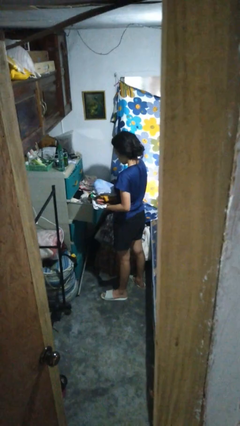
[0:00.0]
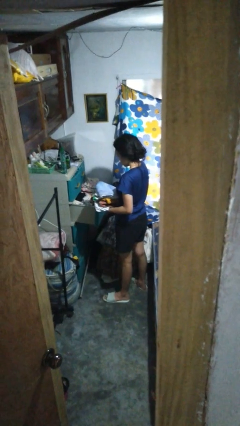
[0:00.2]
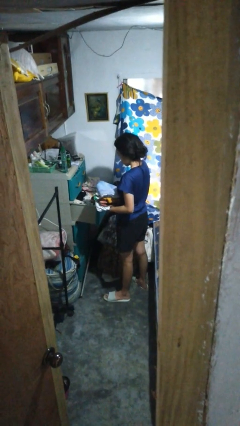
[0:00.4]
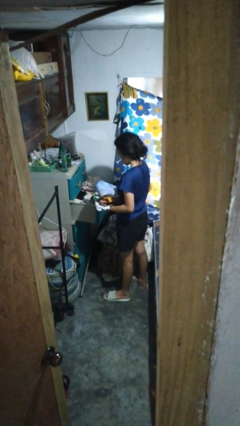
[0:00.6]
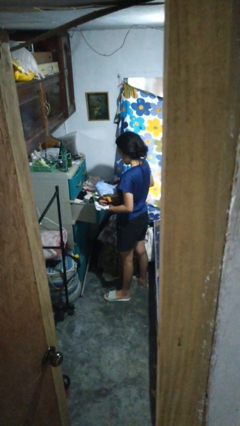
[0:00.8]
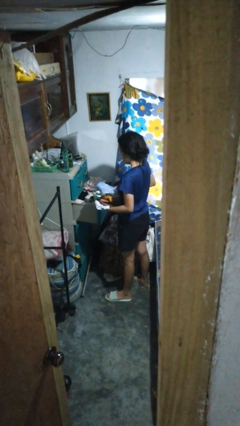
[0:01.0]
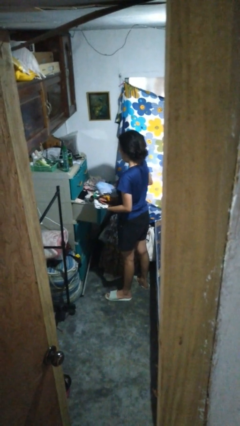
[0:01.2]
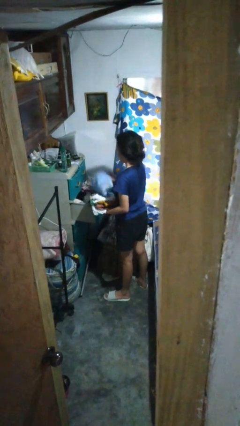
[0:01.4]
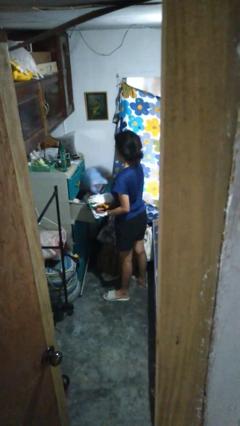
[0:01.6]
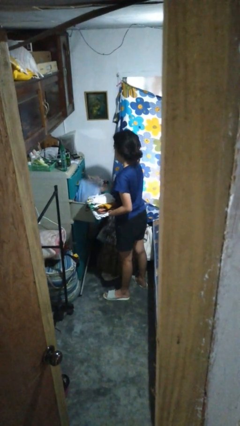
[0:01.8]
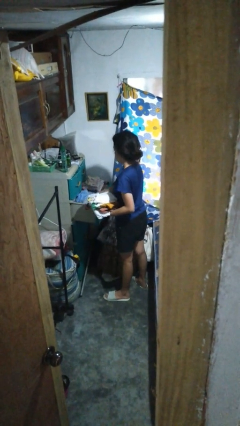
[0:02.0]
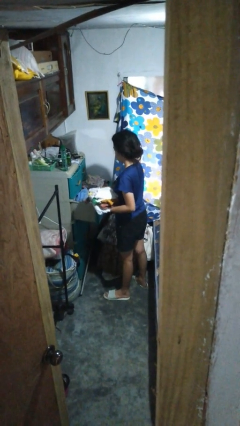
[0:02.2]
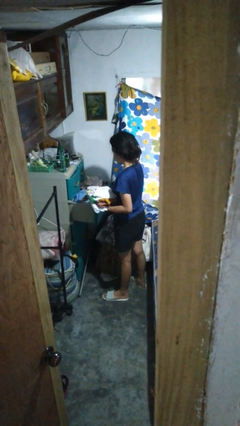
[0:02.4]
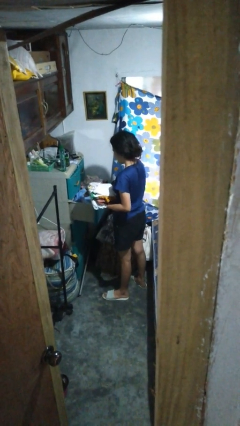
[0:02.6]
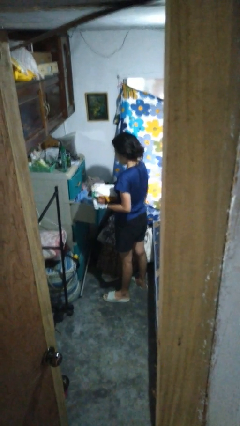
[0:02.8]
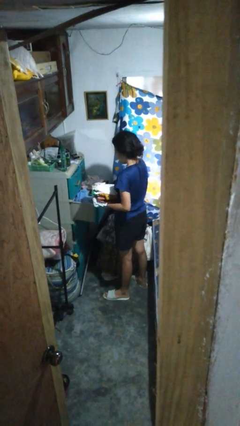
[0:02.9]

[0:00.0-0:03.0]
person puts clothes into dresser

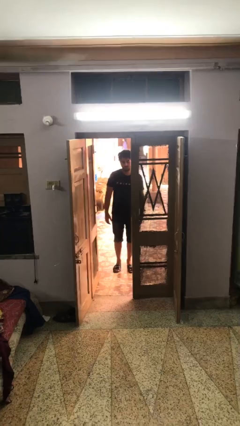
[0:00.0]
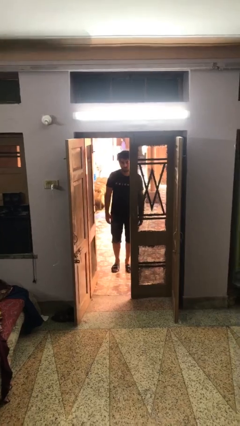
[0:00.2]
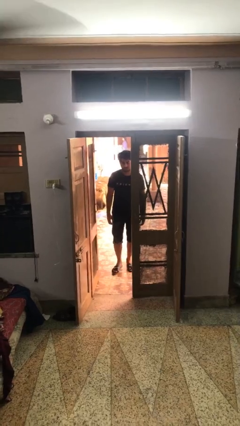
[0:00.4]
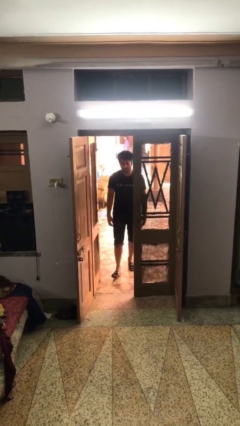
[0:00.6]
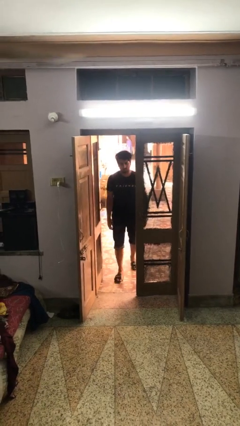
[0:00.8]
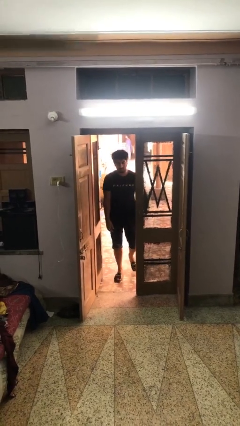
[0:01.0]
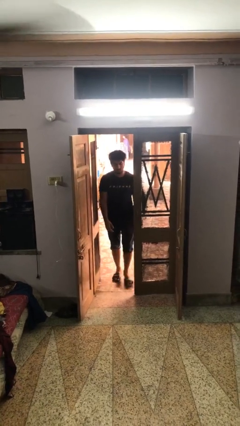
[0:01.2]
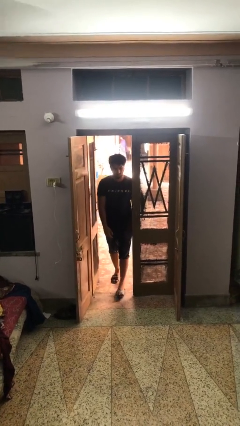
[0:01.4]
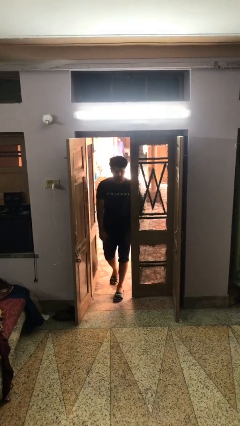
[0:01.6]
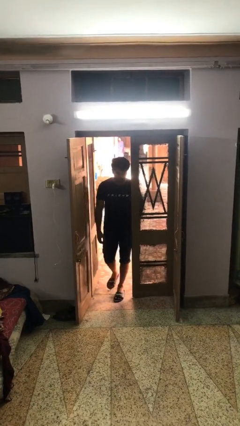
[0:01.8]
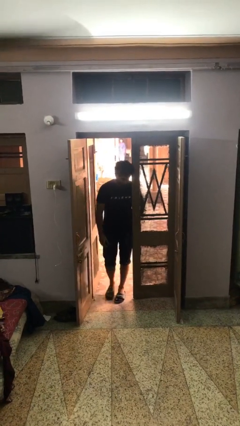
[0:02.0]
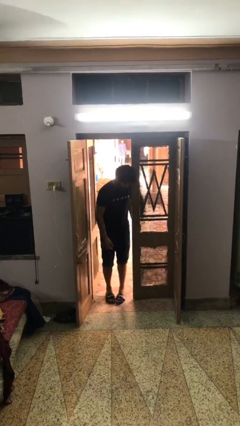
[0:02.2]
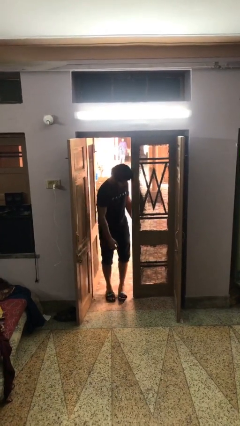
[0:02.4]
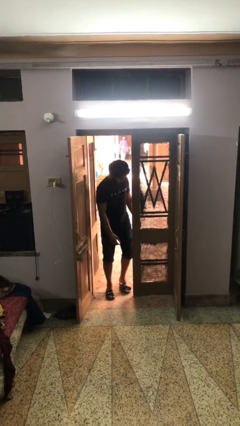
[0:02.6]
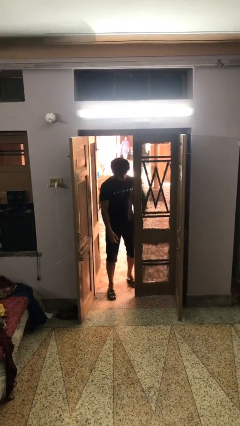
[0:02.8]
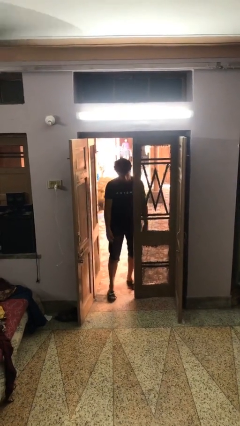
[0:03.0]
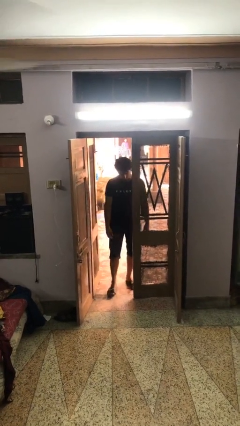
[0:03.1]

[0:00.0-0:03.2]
person bumps into wall

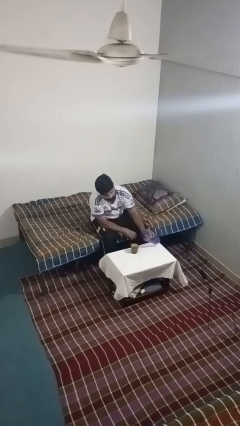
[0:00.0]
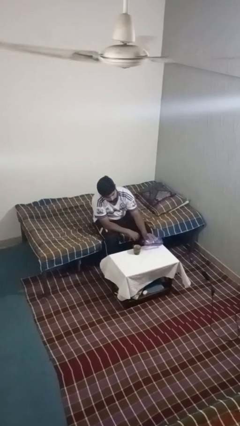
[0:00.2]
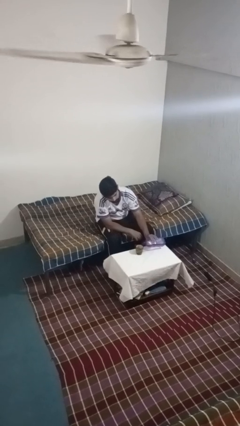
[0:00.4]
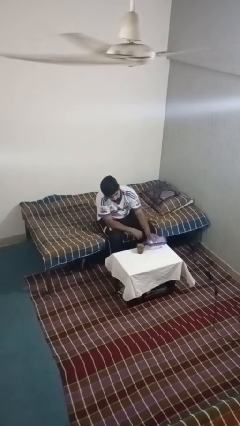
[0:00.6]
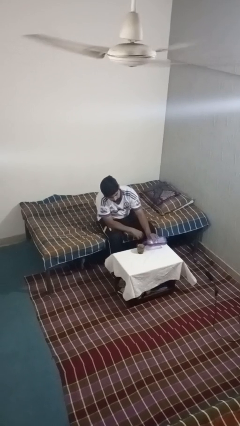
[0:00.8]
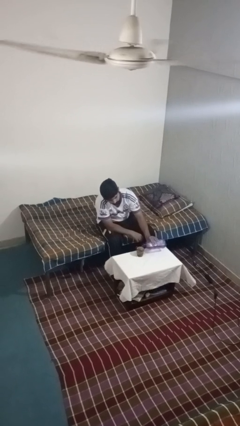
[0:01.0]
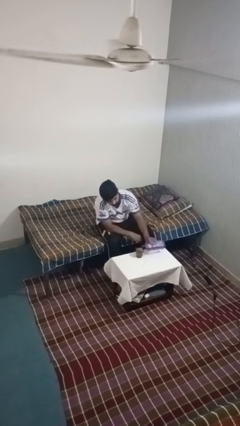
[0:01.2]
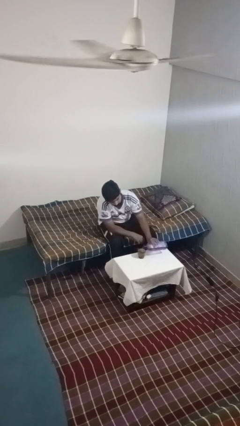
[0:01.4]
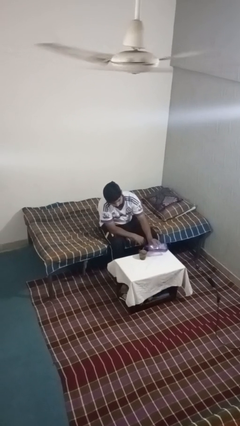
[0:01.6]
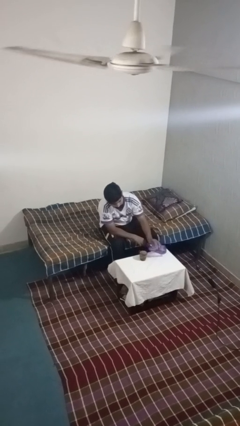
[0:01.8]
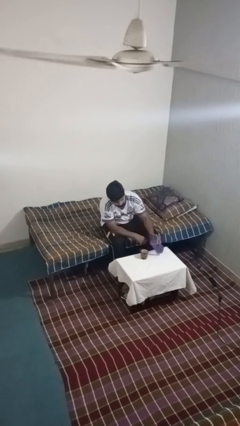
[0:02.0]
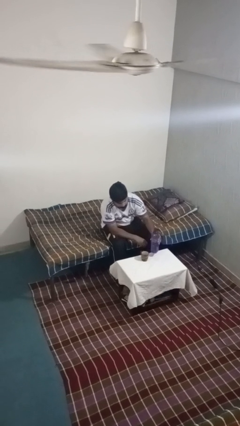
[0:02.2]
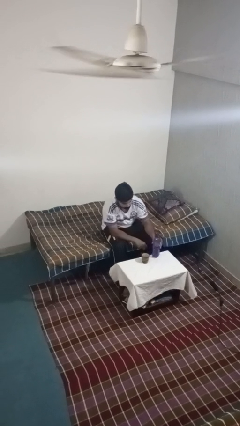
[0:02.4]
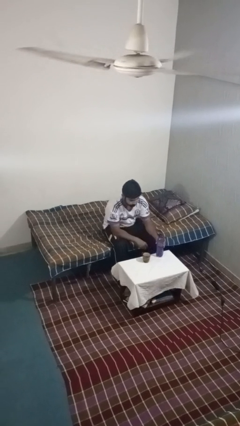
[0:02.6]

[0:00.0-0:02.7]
person pours liquid into cup

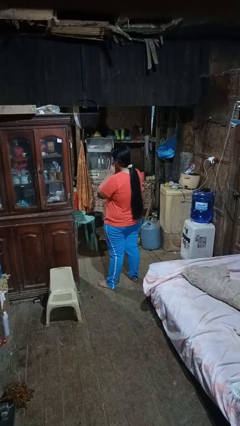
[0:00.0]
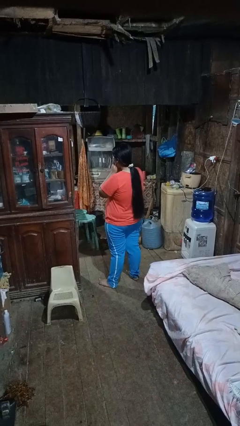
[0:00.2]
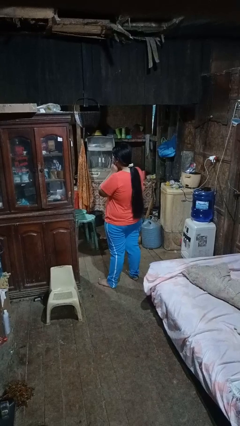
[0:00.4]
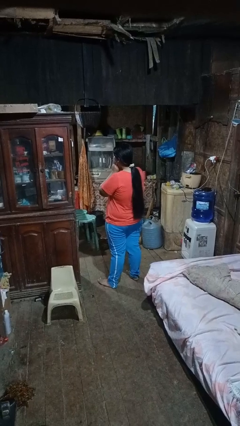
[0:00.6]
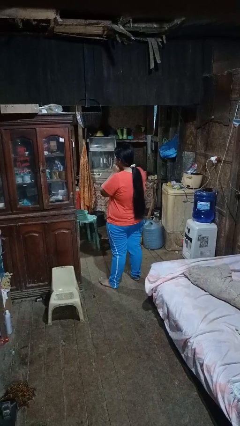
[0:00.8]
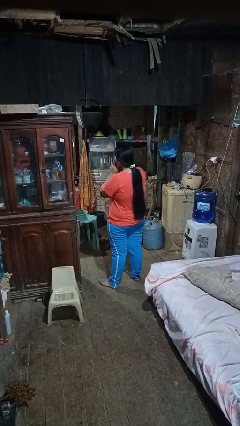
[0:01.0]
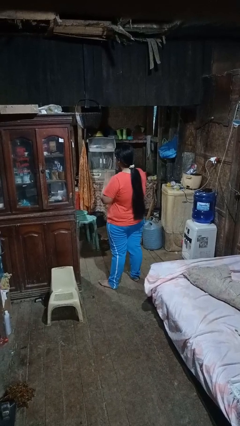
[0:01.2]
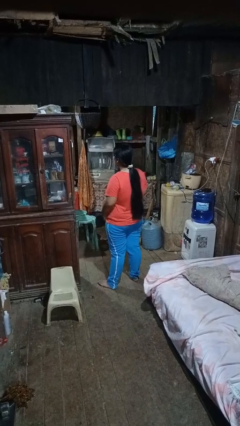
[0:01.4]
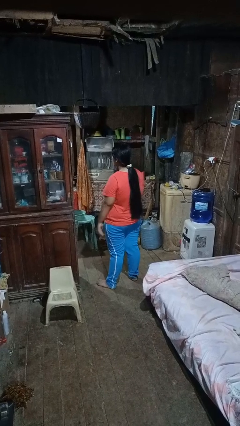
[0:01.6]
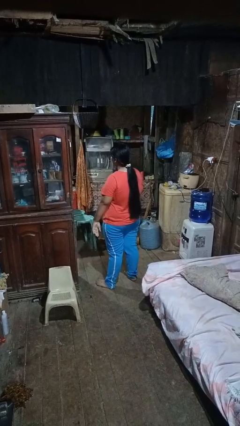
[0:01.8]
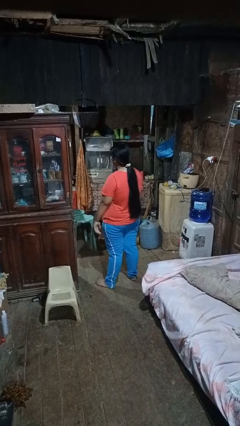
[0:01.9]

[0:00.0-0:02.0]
person yawns

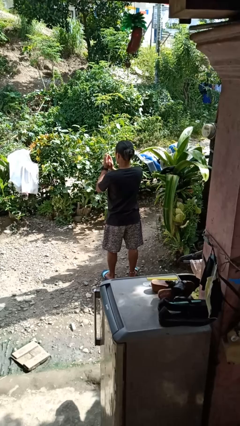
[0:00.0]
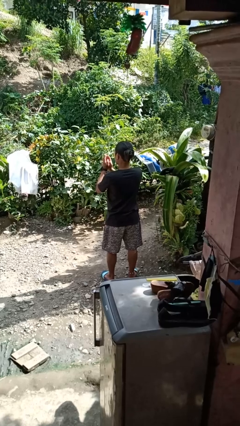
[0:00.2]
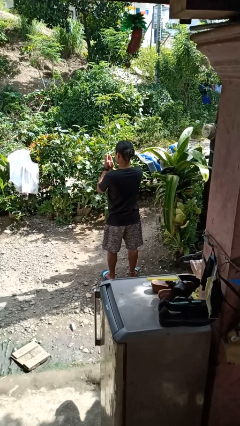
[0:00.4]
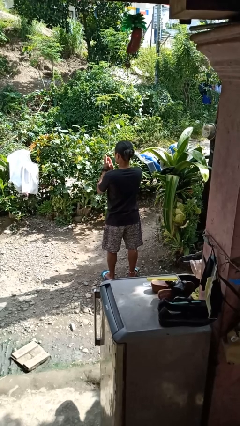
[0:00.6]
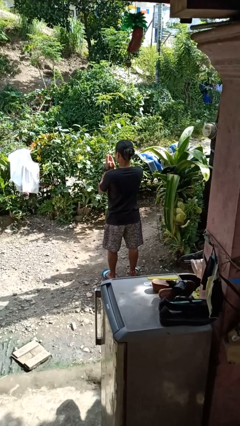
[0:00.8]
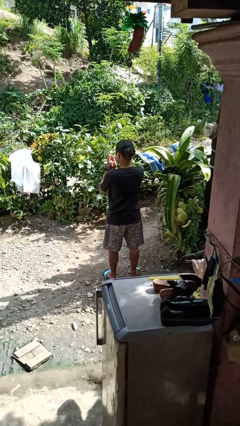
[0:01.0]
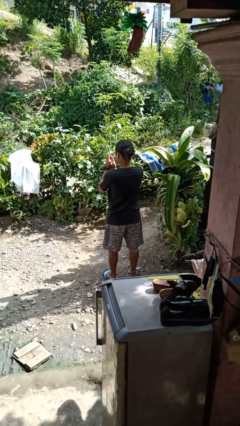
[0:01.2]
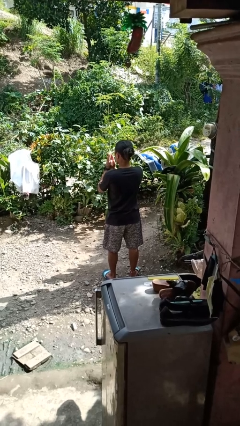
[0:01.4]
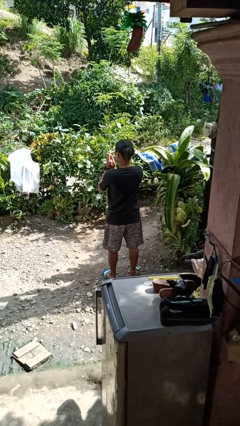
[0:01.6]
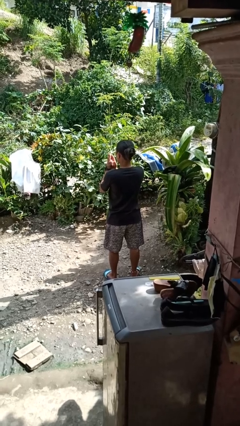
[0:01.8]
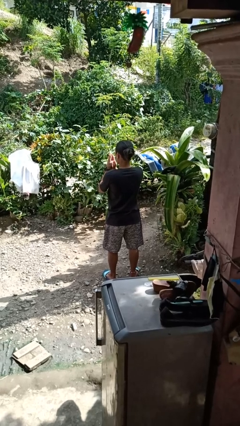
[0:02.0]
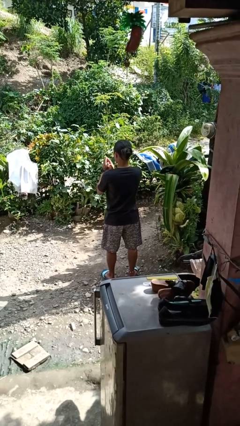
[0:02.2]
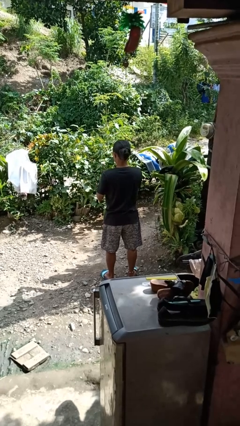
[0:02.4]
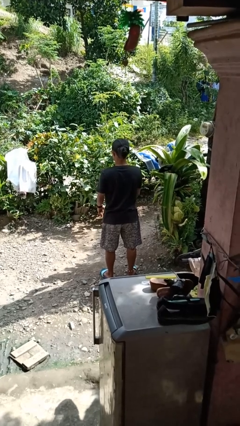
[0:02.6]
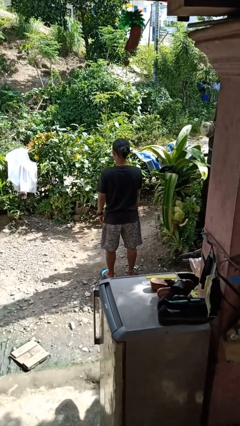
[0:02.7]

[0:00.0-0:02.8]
person blows into hands

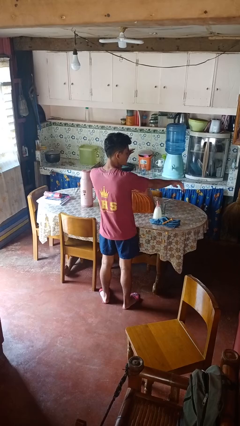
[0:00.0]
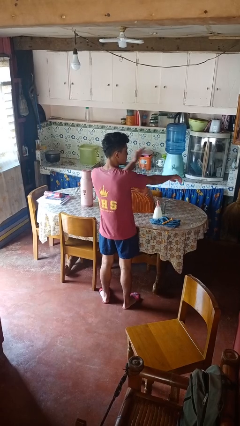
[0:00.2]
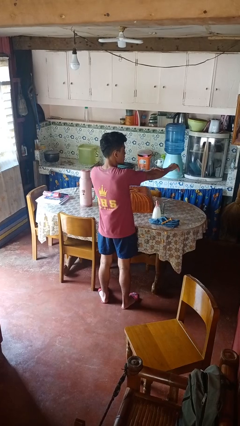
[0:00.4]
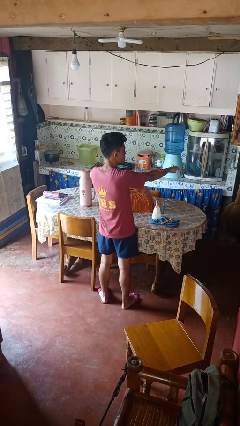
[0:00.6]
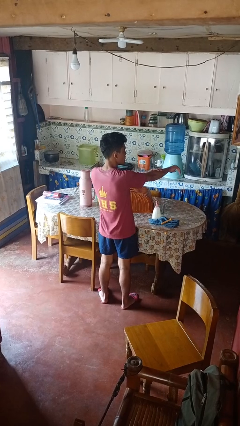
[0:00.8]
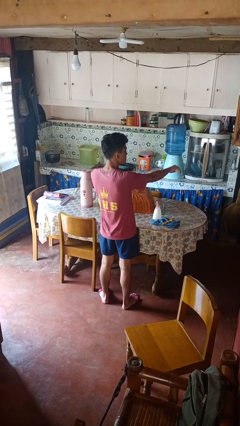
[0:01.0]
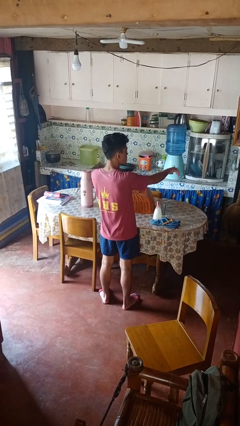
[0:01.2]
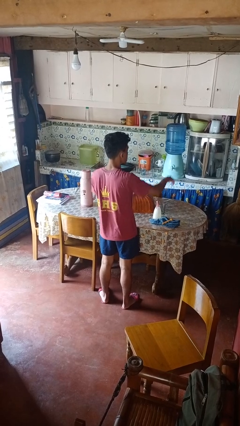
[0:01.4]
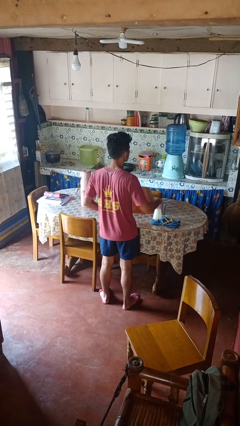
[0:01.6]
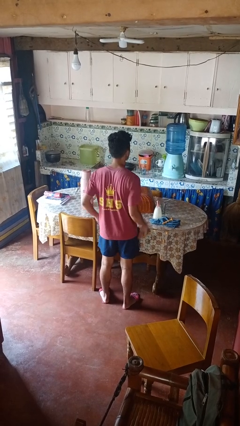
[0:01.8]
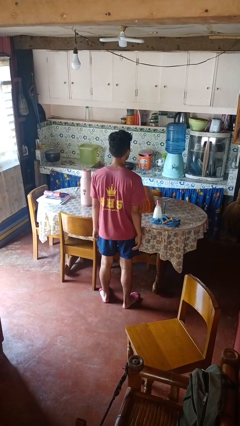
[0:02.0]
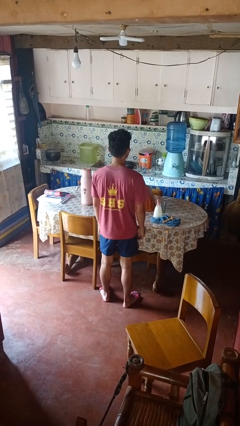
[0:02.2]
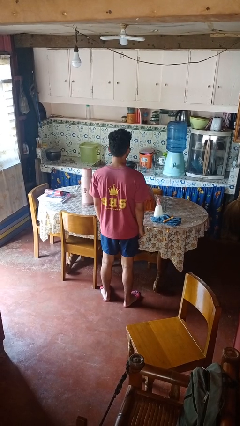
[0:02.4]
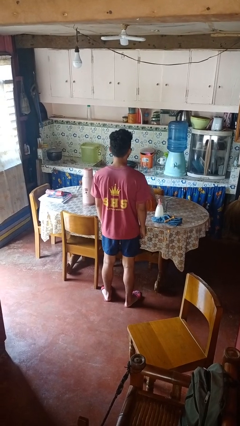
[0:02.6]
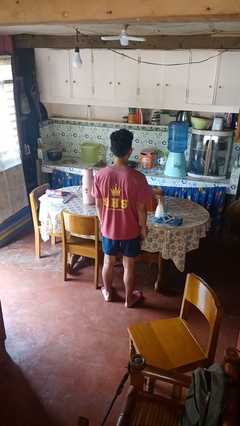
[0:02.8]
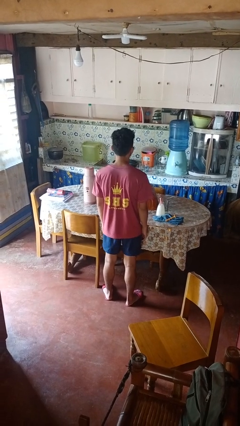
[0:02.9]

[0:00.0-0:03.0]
person swats bug

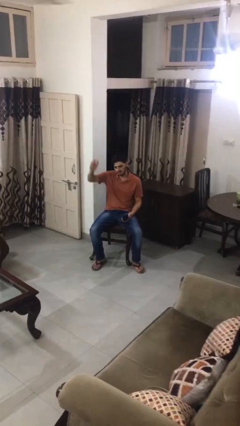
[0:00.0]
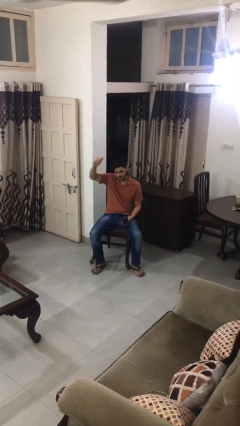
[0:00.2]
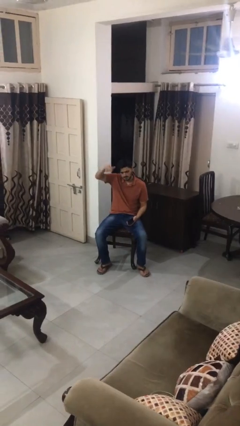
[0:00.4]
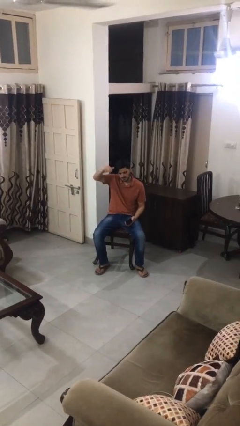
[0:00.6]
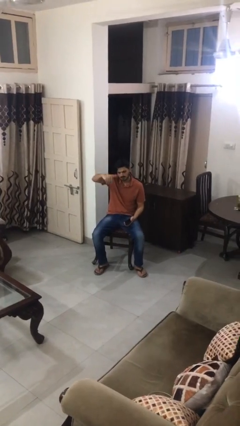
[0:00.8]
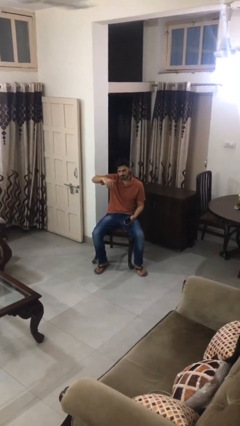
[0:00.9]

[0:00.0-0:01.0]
person gestures come here
